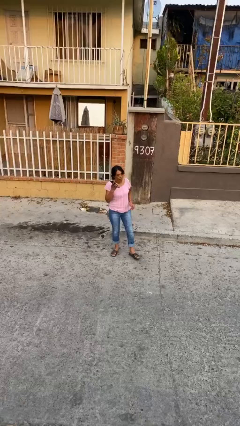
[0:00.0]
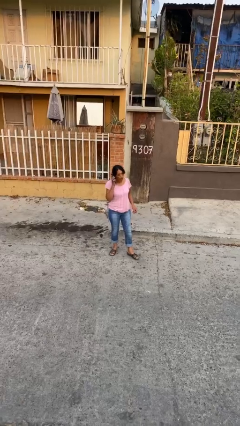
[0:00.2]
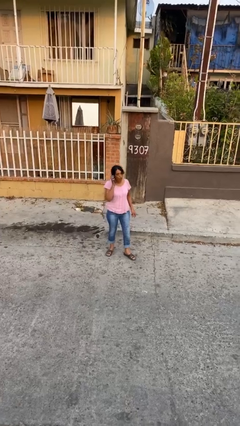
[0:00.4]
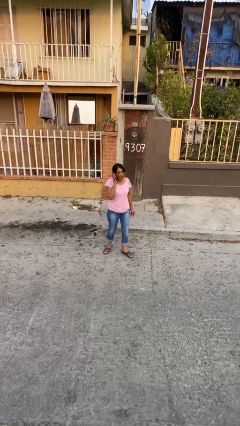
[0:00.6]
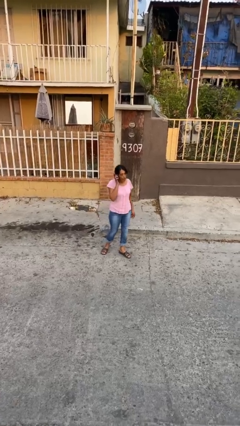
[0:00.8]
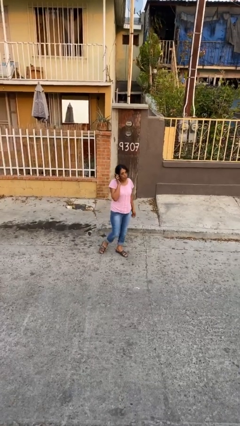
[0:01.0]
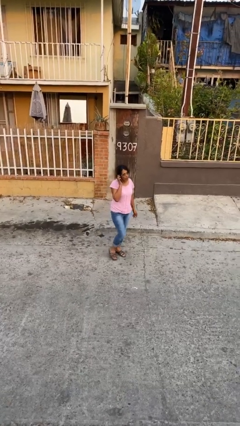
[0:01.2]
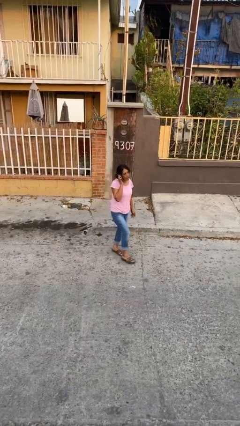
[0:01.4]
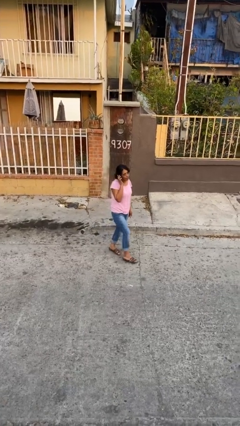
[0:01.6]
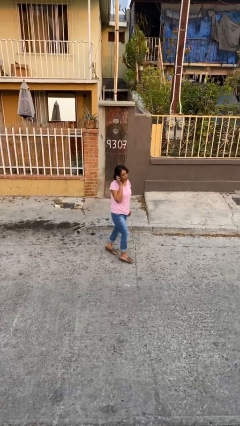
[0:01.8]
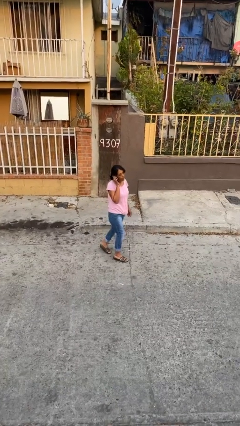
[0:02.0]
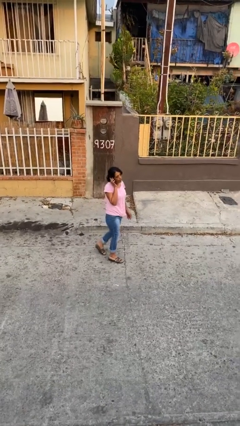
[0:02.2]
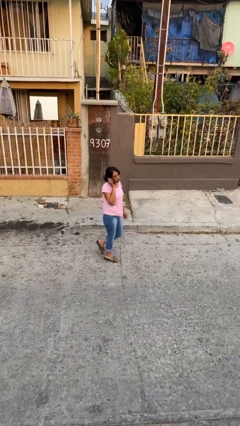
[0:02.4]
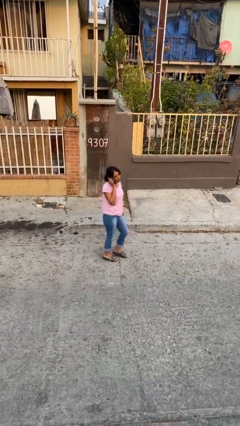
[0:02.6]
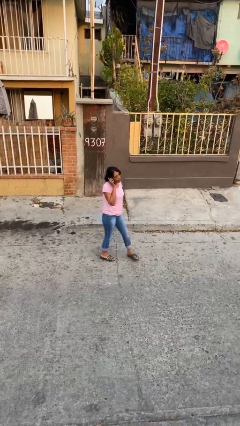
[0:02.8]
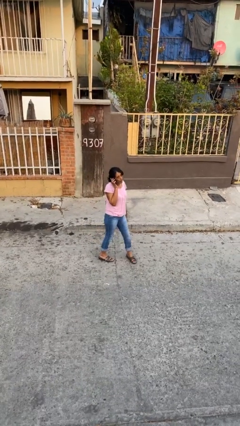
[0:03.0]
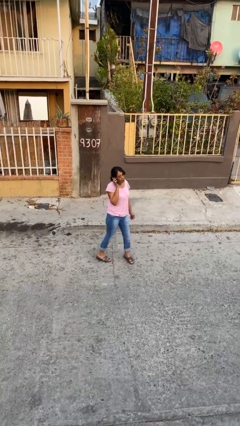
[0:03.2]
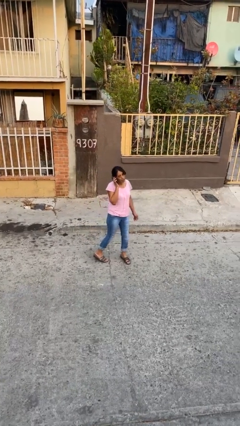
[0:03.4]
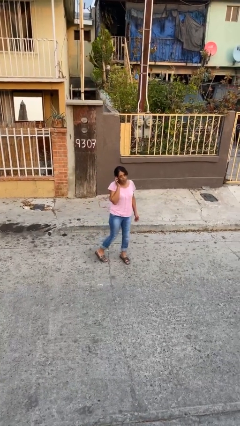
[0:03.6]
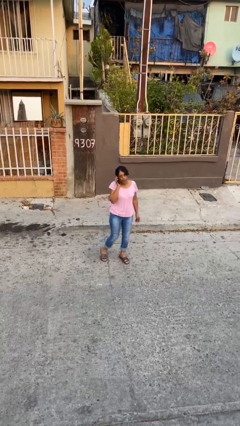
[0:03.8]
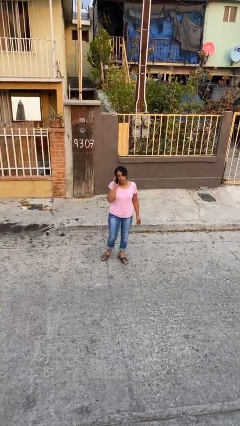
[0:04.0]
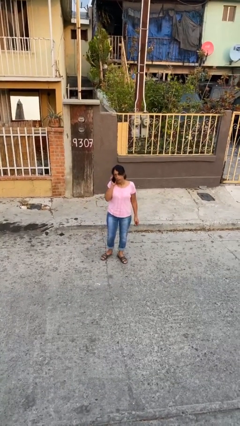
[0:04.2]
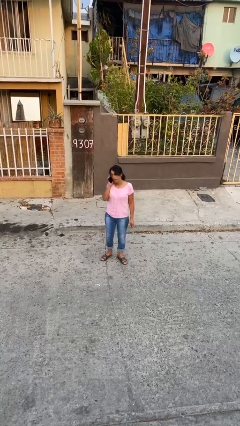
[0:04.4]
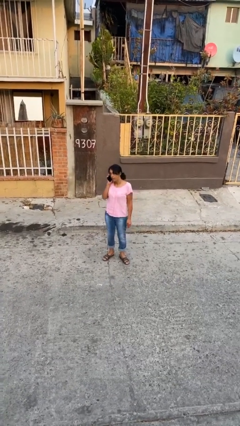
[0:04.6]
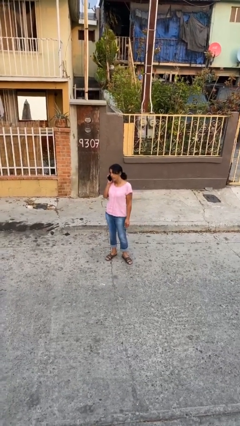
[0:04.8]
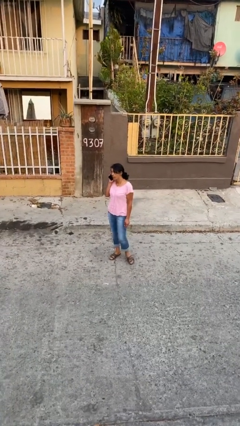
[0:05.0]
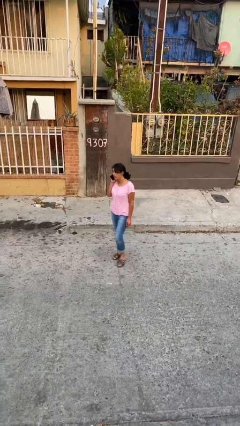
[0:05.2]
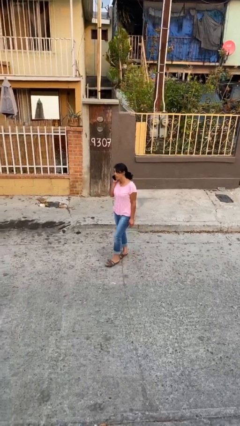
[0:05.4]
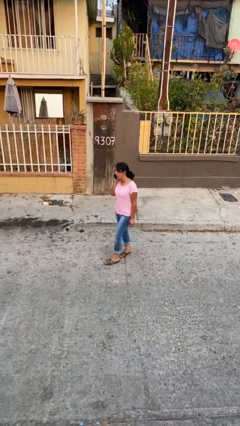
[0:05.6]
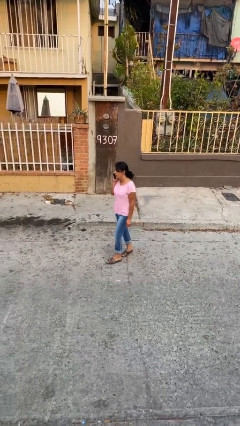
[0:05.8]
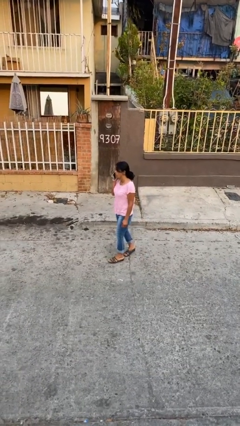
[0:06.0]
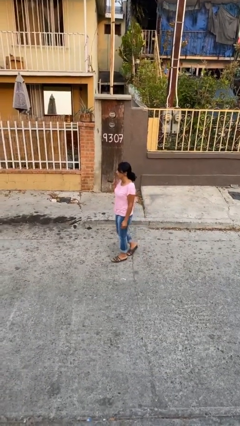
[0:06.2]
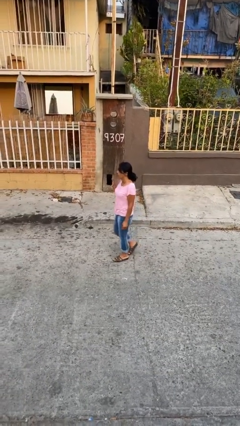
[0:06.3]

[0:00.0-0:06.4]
person talks on phone

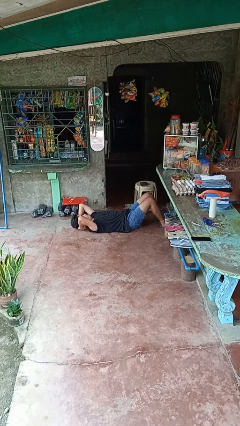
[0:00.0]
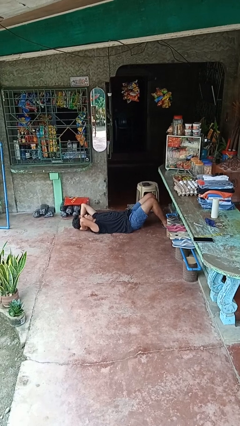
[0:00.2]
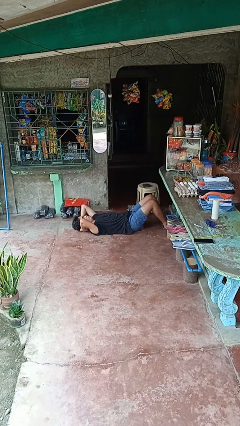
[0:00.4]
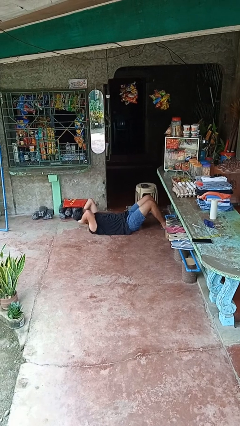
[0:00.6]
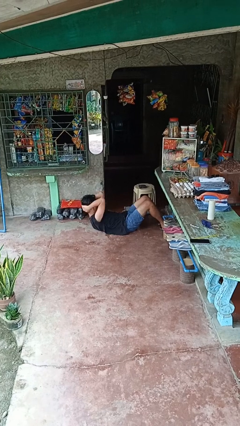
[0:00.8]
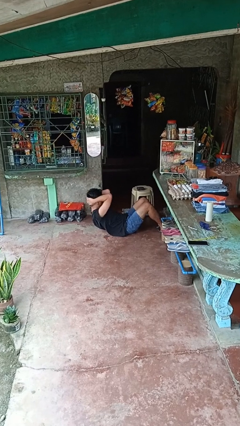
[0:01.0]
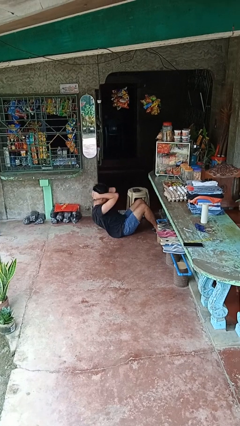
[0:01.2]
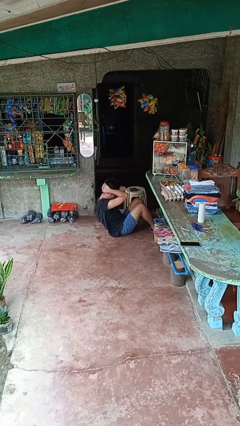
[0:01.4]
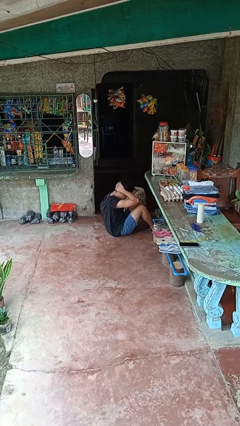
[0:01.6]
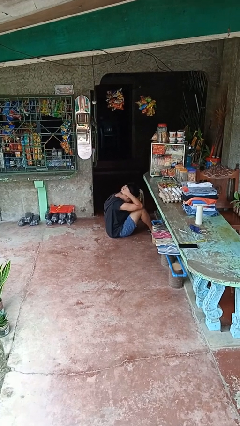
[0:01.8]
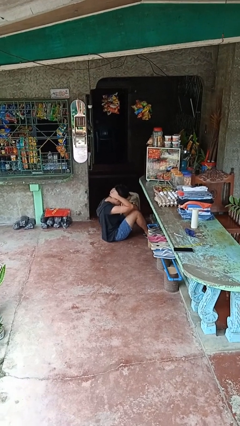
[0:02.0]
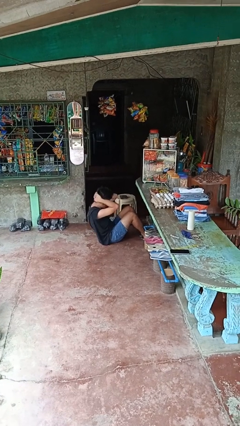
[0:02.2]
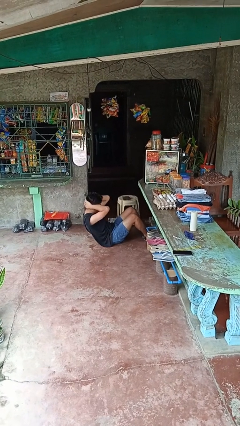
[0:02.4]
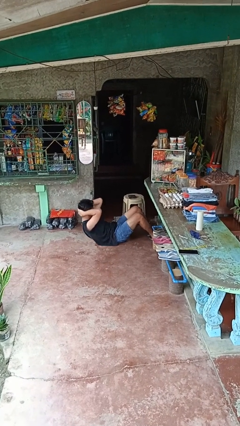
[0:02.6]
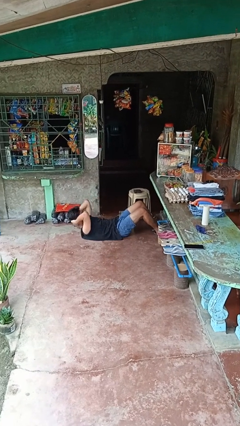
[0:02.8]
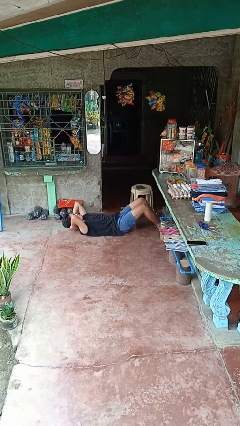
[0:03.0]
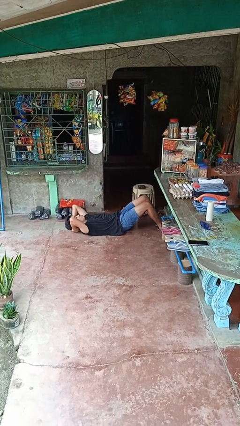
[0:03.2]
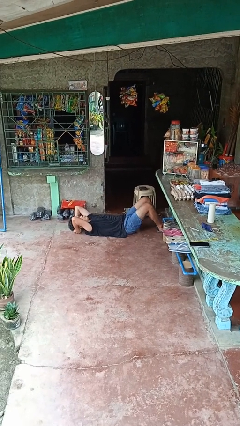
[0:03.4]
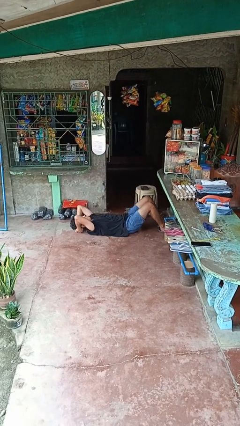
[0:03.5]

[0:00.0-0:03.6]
person exercises with situp

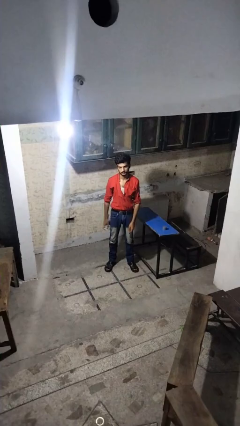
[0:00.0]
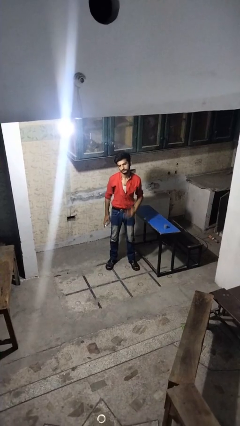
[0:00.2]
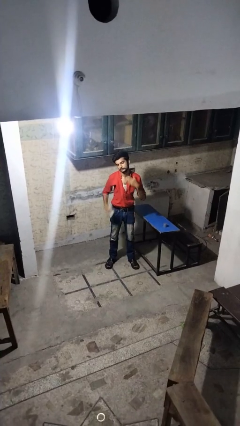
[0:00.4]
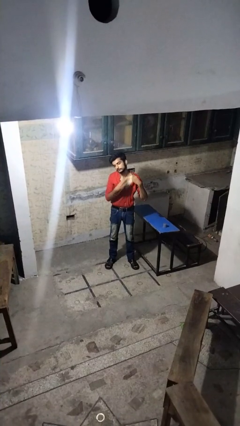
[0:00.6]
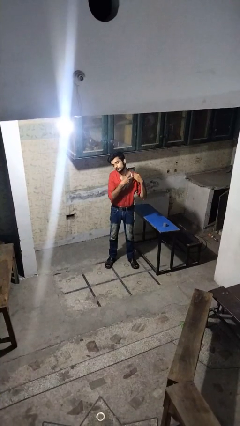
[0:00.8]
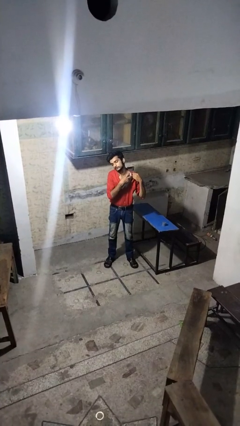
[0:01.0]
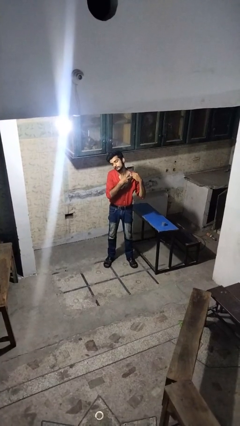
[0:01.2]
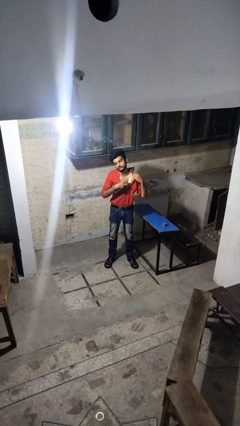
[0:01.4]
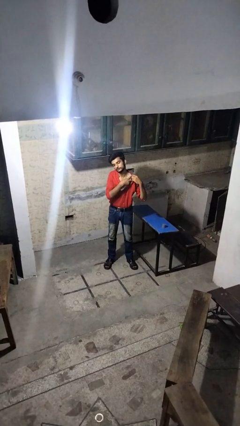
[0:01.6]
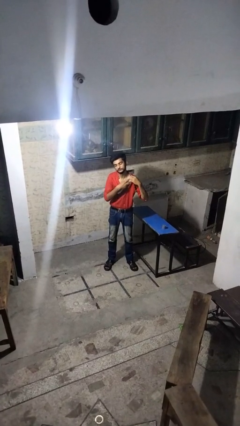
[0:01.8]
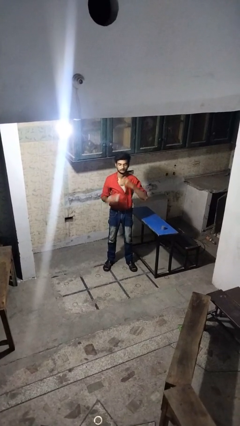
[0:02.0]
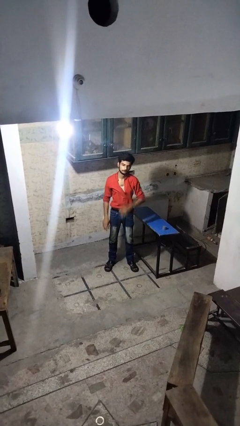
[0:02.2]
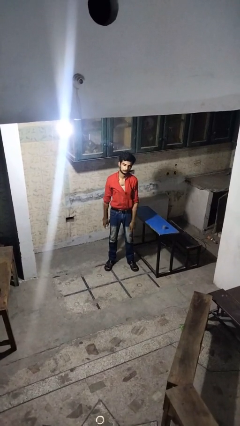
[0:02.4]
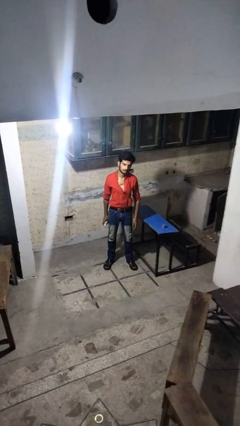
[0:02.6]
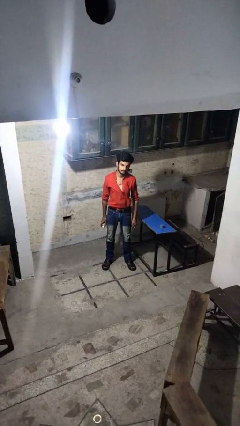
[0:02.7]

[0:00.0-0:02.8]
person applies deodorant

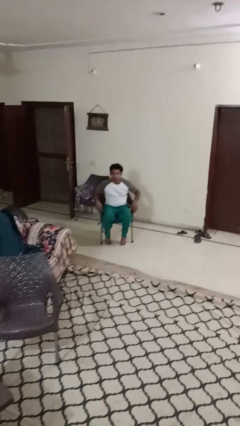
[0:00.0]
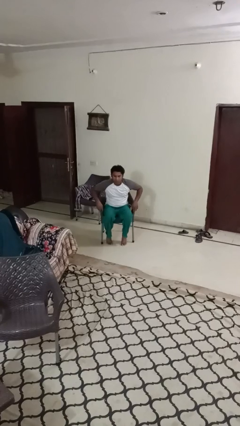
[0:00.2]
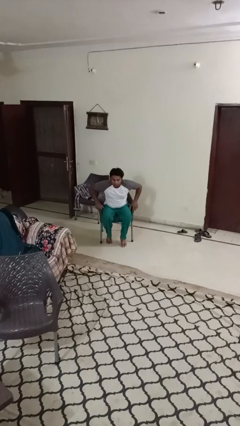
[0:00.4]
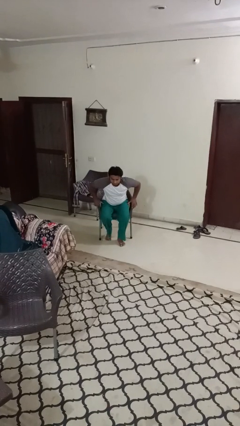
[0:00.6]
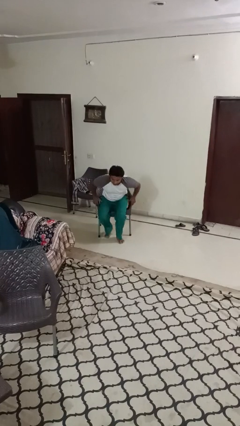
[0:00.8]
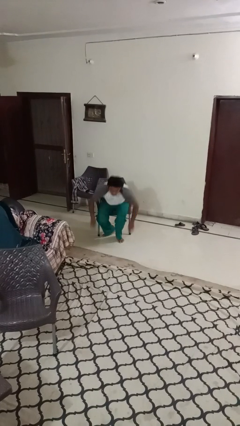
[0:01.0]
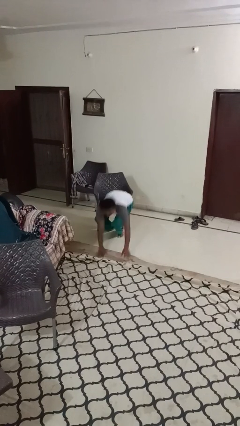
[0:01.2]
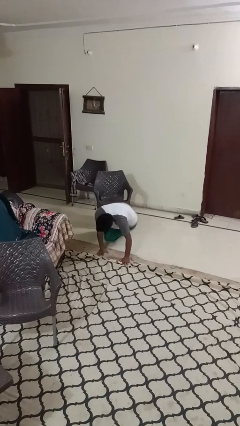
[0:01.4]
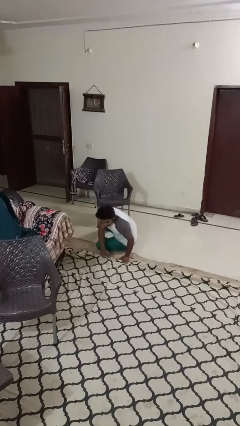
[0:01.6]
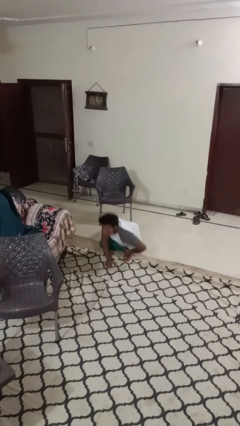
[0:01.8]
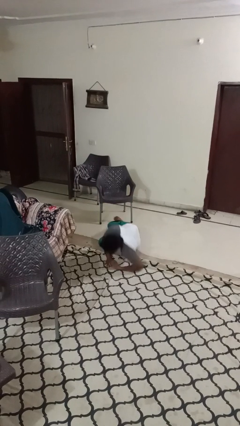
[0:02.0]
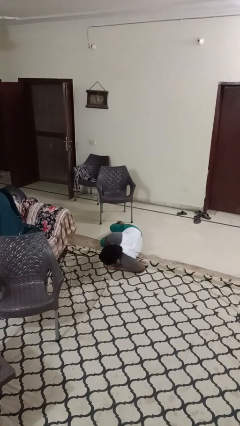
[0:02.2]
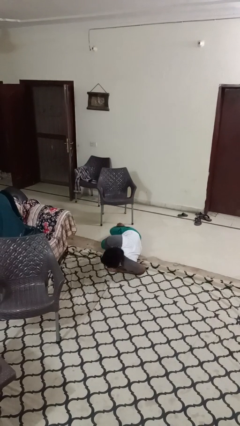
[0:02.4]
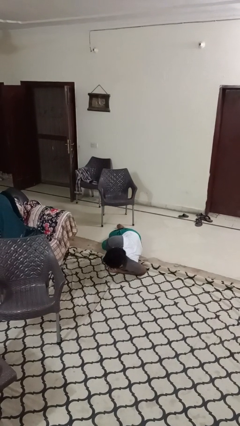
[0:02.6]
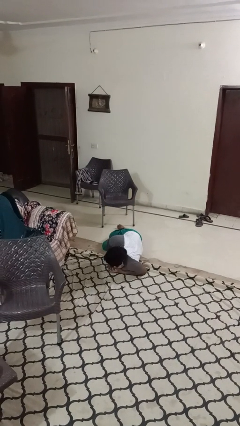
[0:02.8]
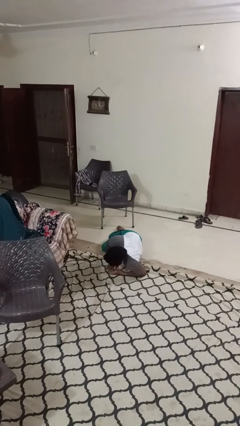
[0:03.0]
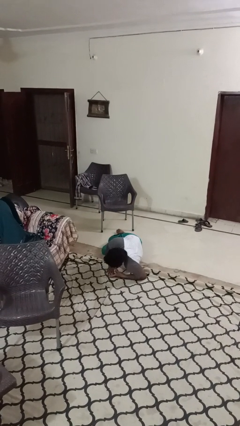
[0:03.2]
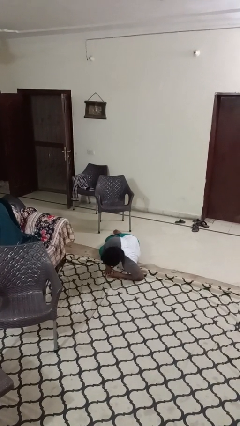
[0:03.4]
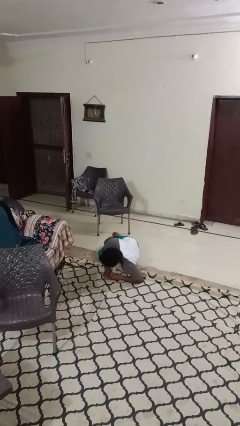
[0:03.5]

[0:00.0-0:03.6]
person falls from chair

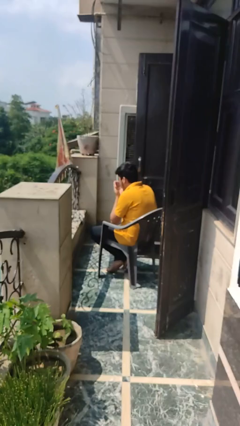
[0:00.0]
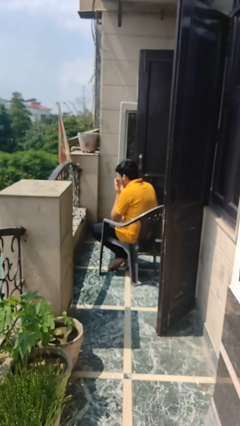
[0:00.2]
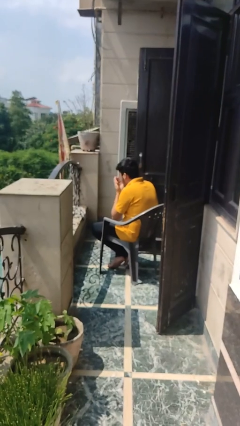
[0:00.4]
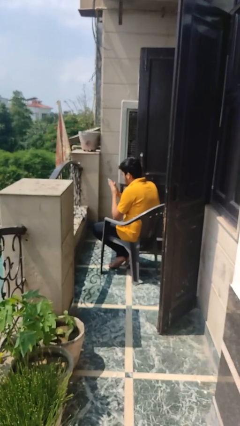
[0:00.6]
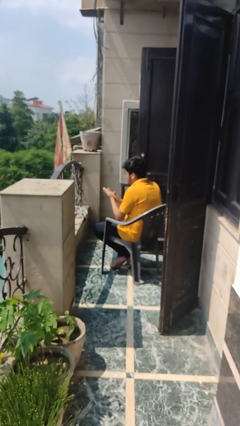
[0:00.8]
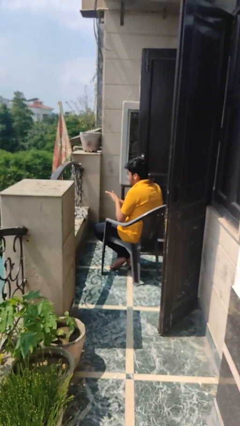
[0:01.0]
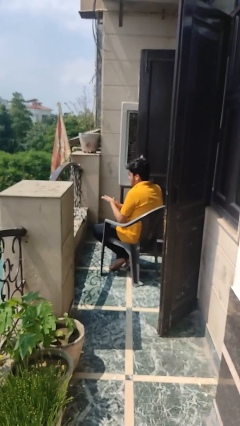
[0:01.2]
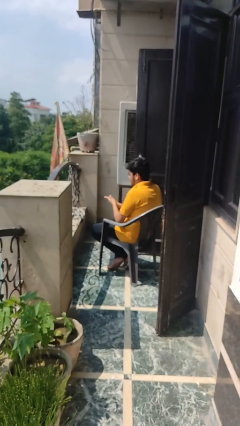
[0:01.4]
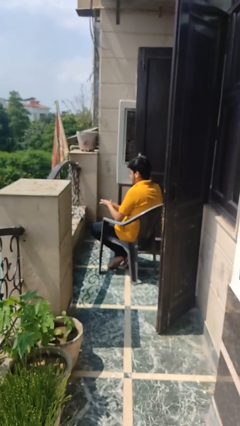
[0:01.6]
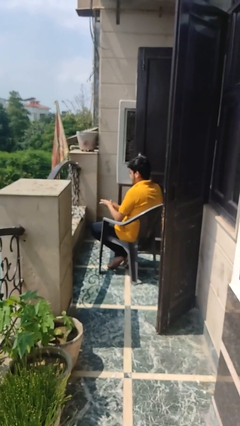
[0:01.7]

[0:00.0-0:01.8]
person blows into hands
